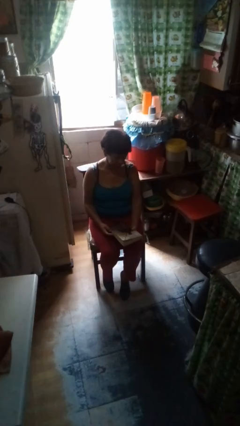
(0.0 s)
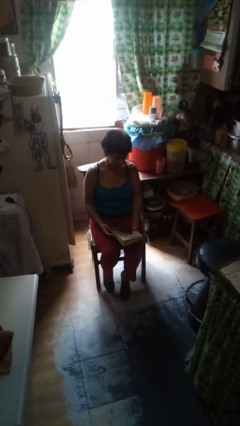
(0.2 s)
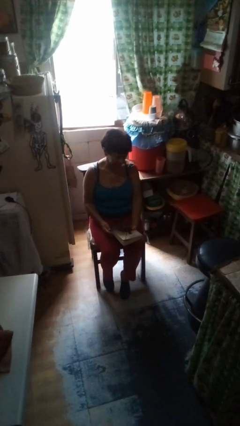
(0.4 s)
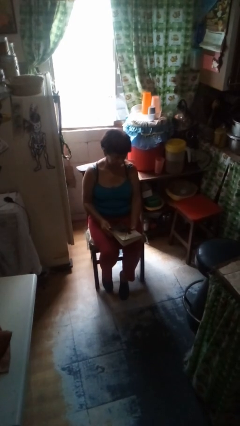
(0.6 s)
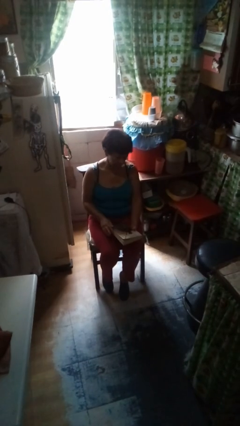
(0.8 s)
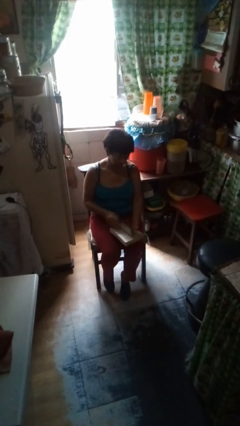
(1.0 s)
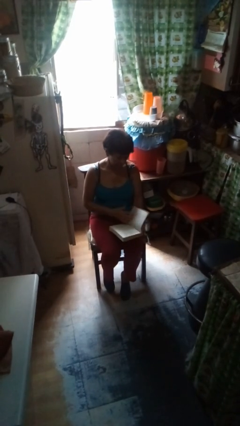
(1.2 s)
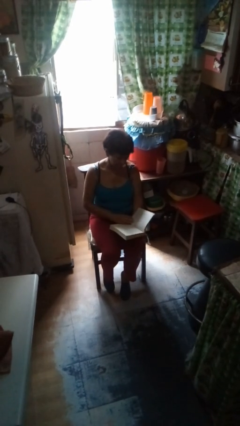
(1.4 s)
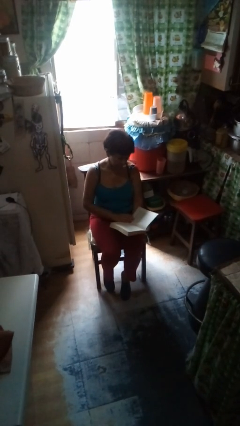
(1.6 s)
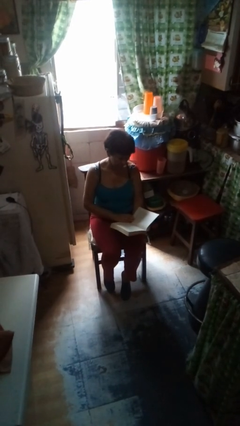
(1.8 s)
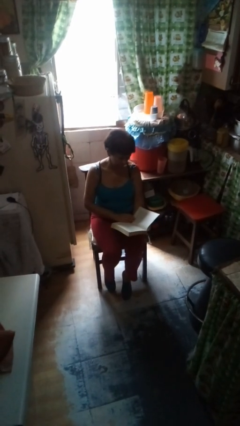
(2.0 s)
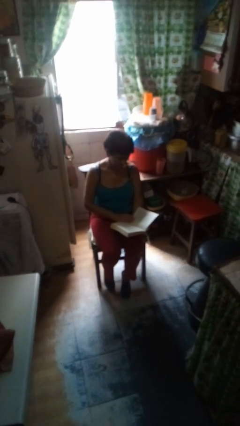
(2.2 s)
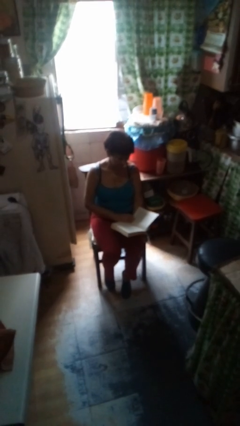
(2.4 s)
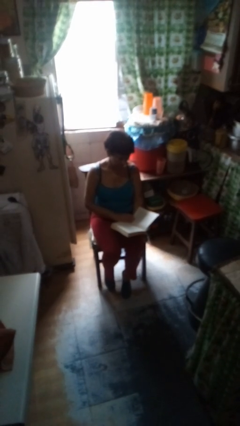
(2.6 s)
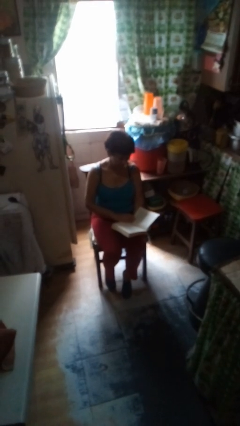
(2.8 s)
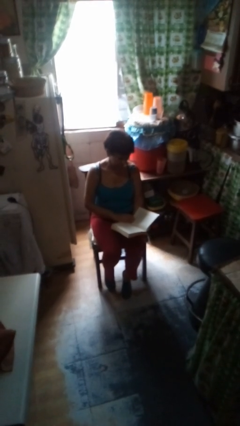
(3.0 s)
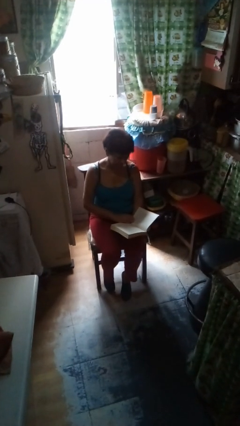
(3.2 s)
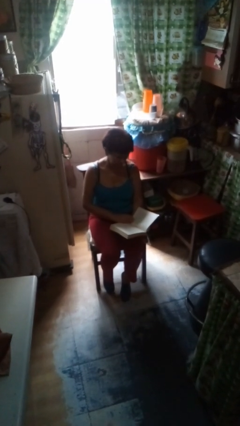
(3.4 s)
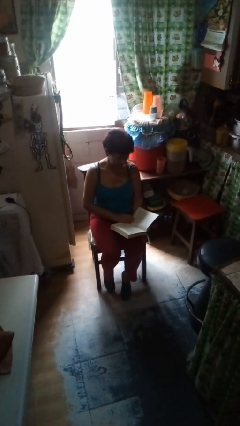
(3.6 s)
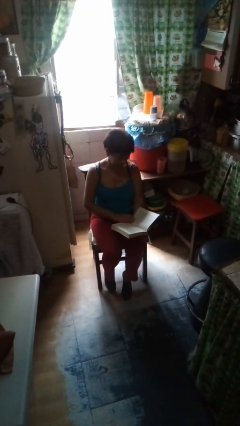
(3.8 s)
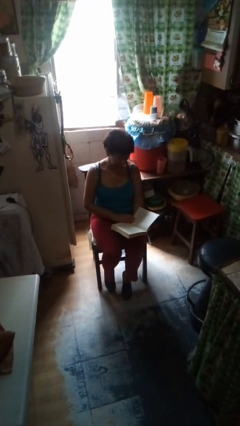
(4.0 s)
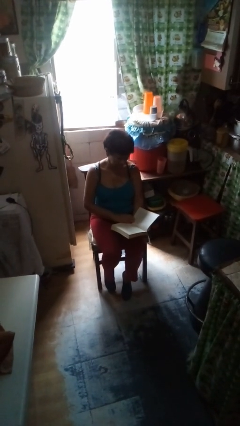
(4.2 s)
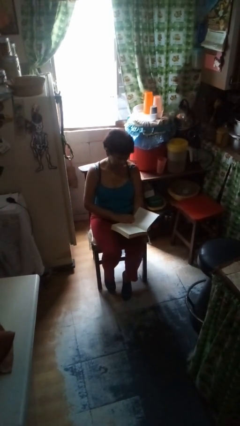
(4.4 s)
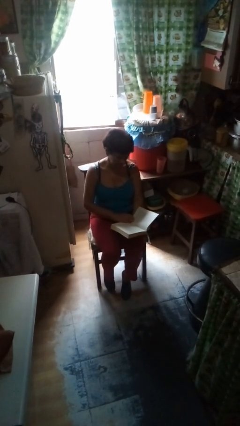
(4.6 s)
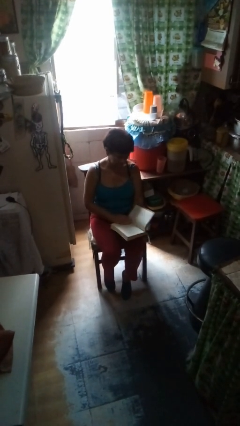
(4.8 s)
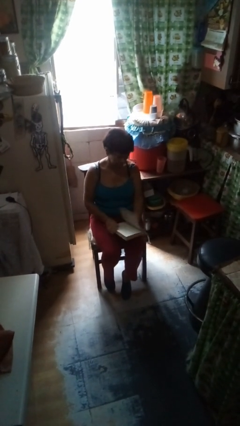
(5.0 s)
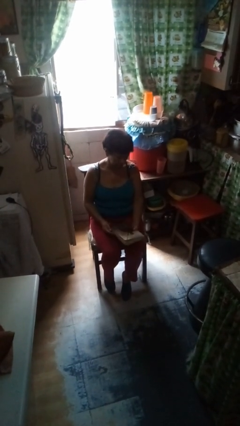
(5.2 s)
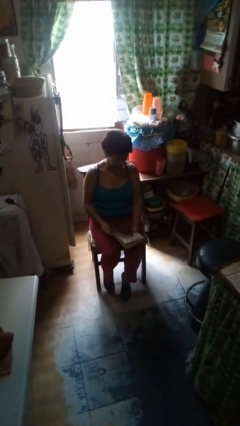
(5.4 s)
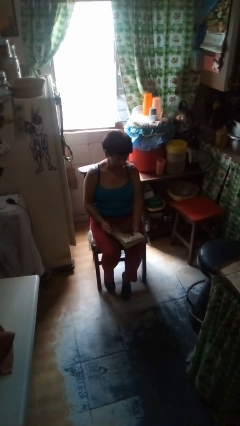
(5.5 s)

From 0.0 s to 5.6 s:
person reads book

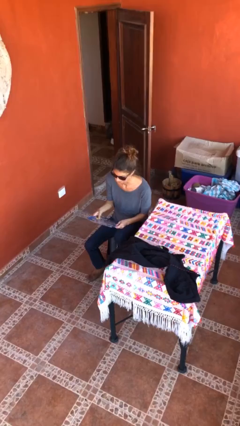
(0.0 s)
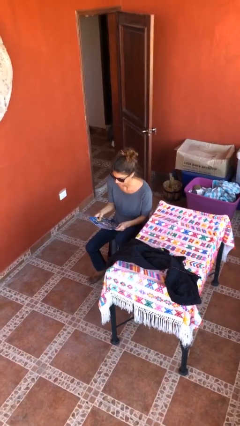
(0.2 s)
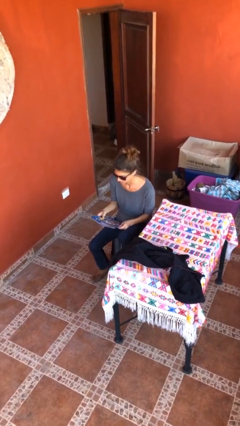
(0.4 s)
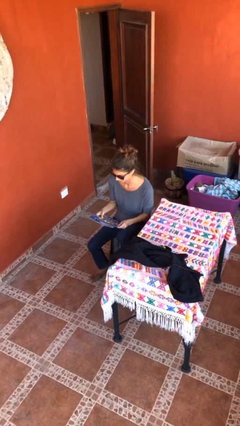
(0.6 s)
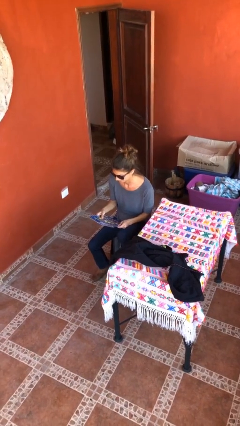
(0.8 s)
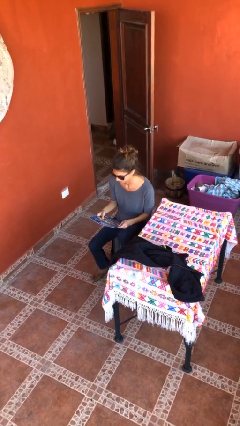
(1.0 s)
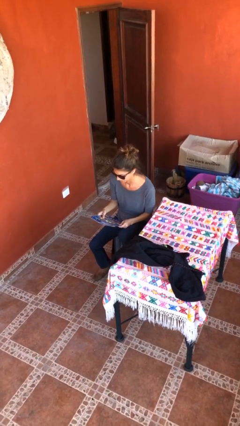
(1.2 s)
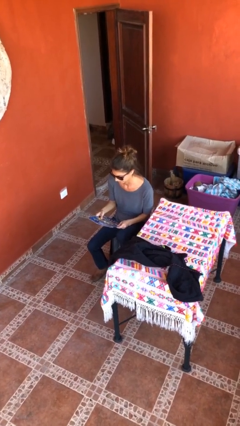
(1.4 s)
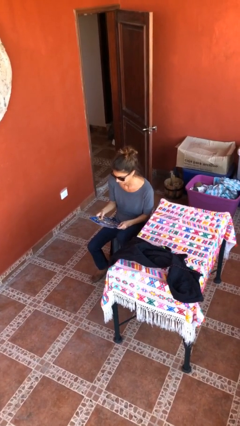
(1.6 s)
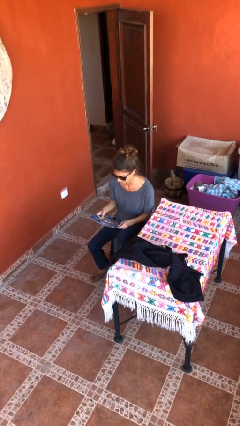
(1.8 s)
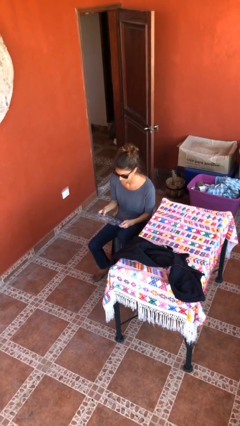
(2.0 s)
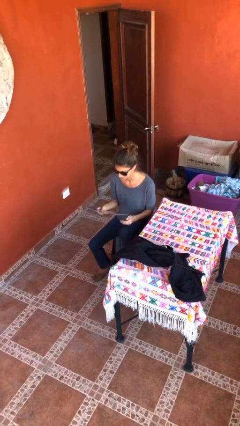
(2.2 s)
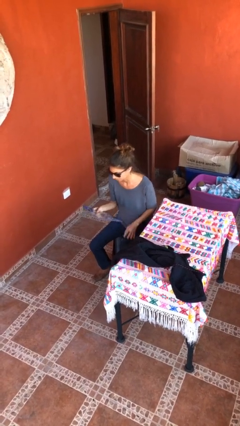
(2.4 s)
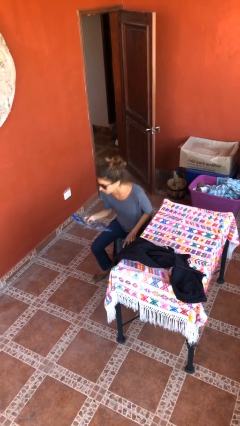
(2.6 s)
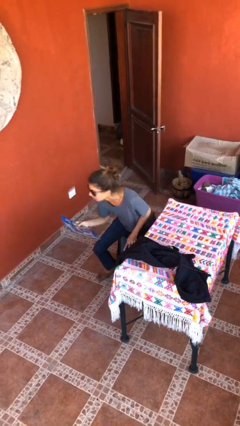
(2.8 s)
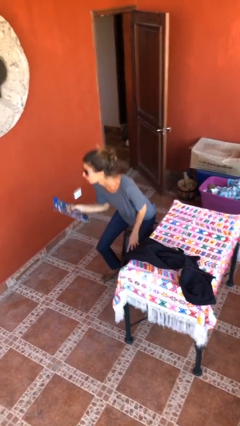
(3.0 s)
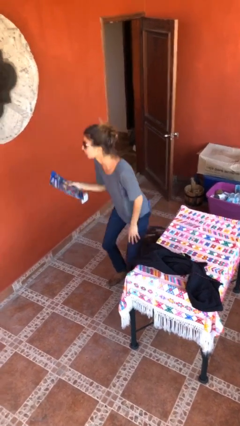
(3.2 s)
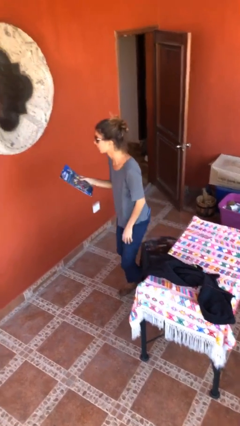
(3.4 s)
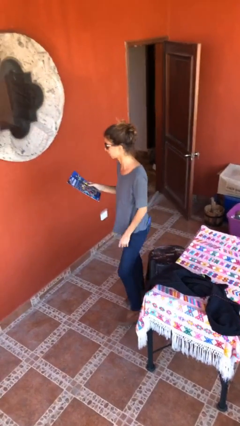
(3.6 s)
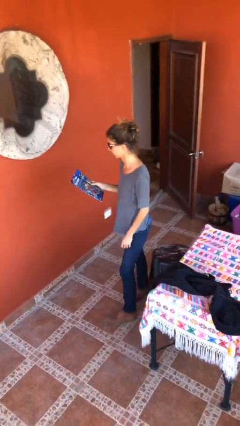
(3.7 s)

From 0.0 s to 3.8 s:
person stands up

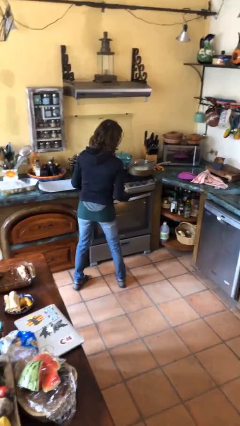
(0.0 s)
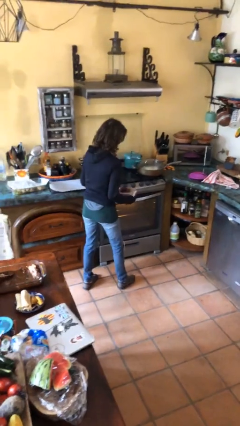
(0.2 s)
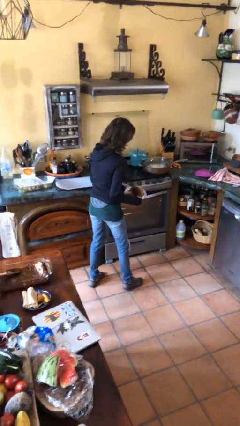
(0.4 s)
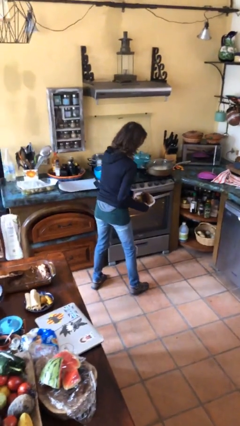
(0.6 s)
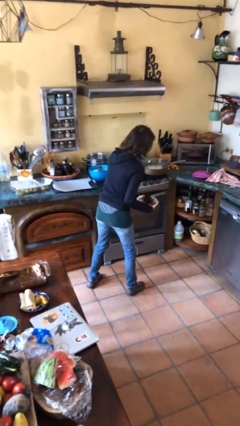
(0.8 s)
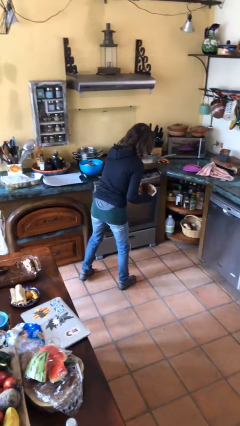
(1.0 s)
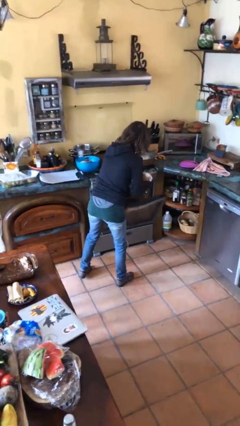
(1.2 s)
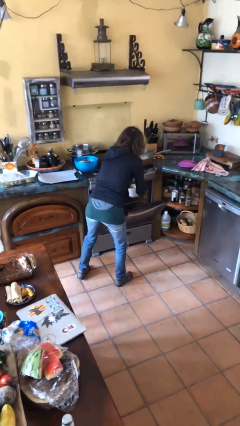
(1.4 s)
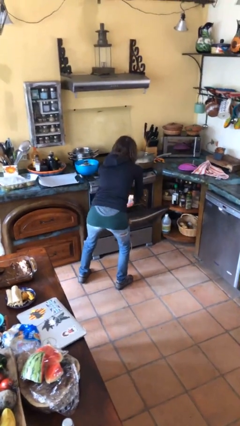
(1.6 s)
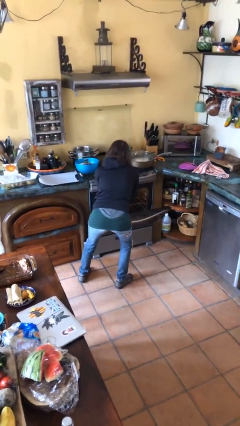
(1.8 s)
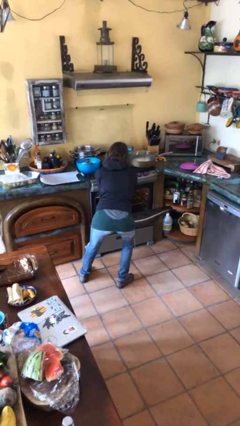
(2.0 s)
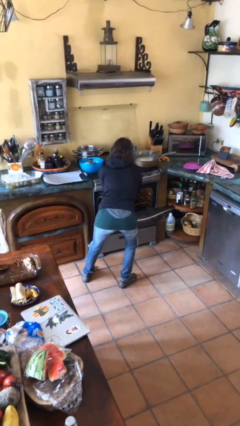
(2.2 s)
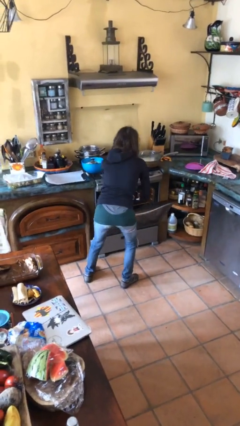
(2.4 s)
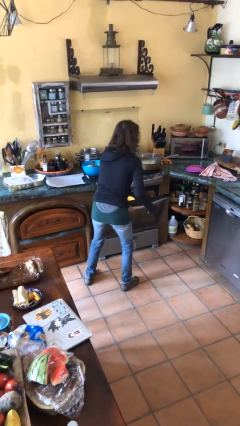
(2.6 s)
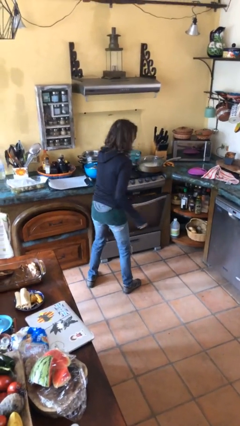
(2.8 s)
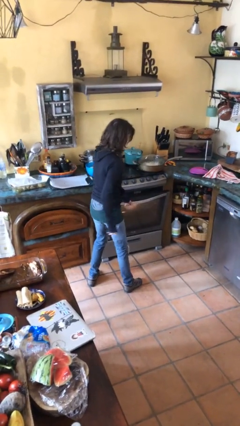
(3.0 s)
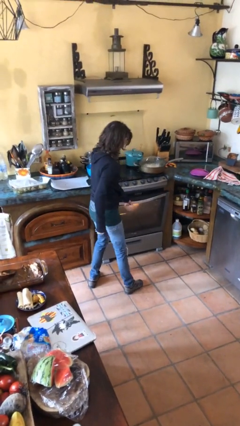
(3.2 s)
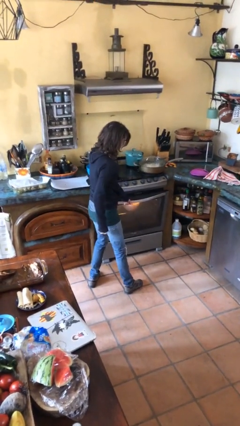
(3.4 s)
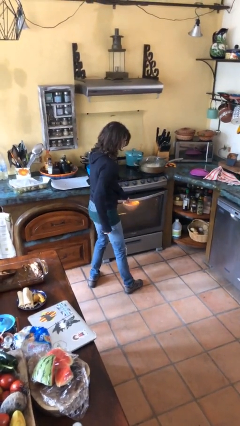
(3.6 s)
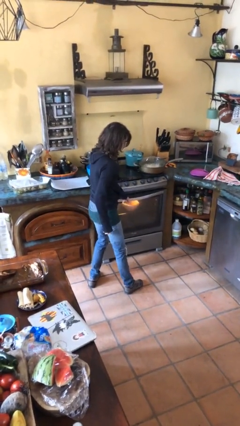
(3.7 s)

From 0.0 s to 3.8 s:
person puts object into oven

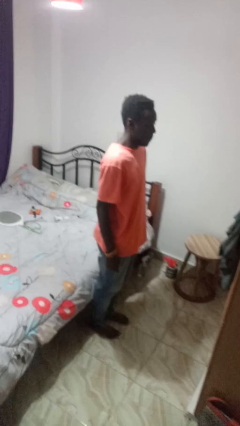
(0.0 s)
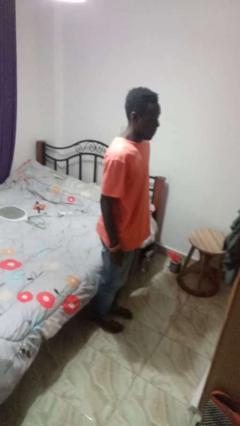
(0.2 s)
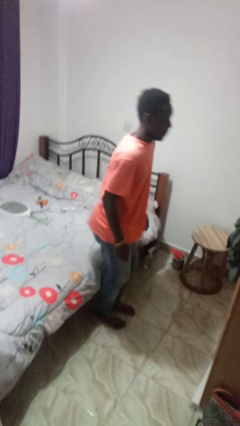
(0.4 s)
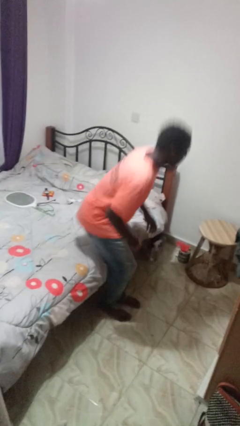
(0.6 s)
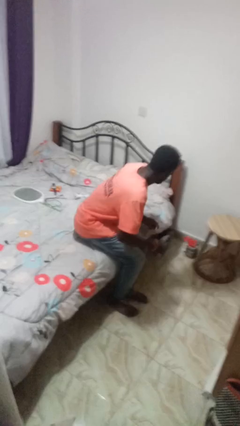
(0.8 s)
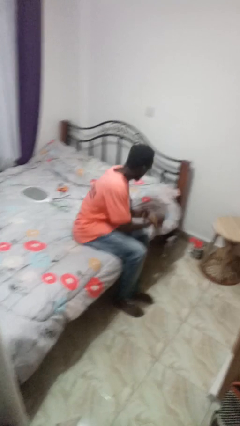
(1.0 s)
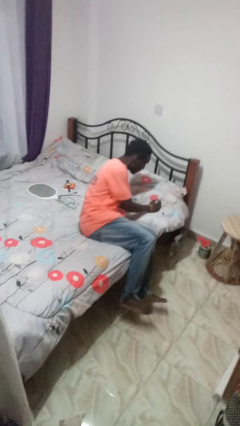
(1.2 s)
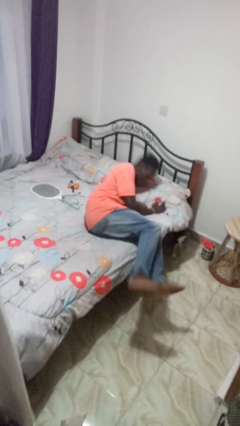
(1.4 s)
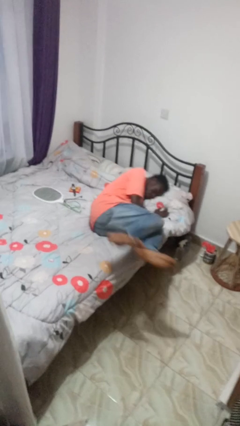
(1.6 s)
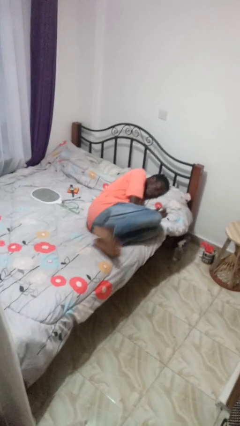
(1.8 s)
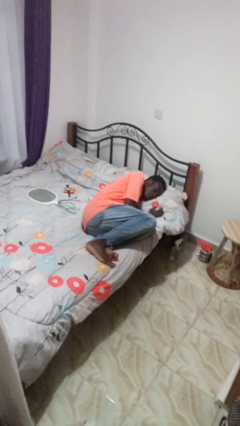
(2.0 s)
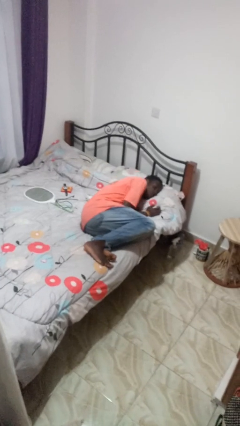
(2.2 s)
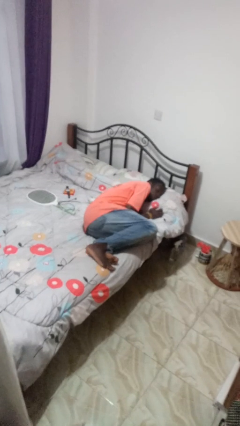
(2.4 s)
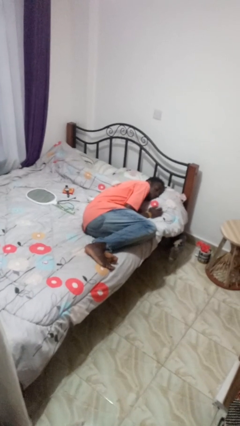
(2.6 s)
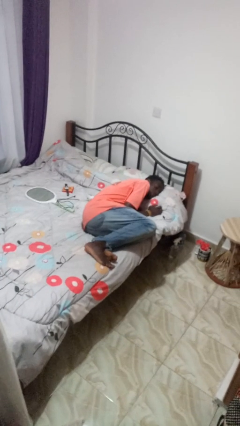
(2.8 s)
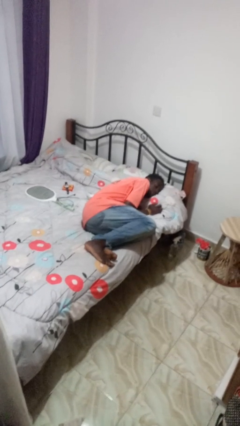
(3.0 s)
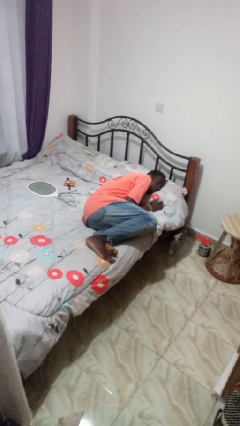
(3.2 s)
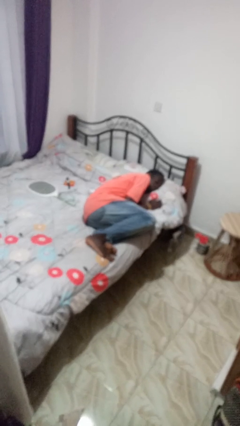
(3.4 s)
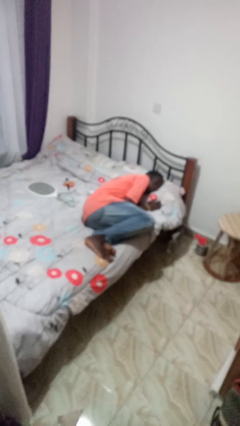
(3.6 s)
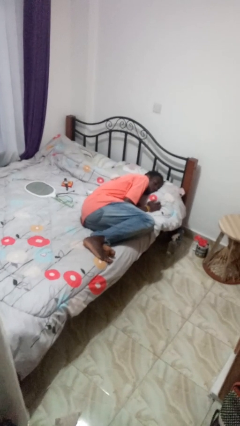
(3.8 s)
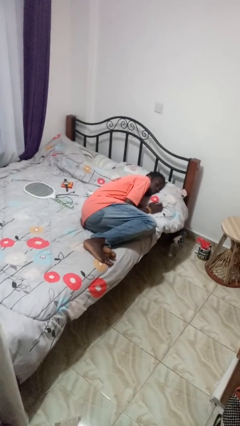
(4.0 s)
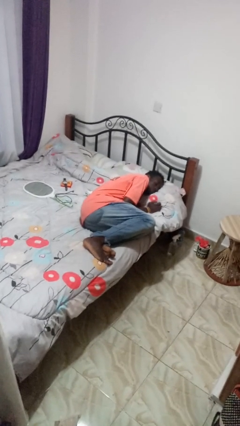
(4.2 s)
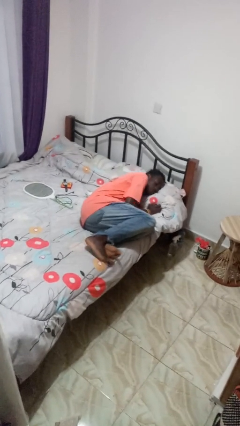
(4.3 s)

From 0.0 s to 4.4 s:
person lies down on bed

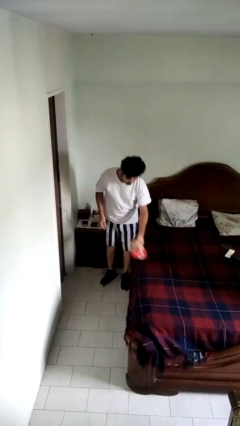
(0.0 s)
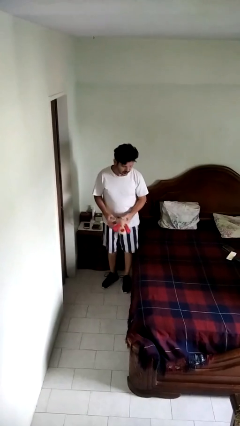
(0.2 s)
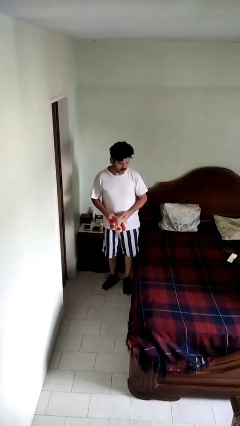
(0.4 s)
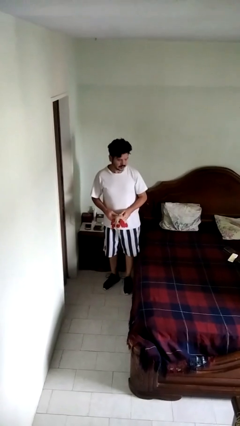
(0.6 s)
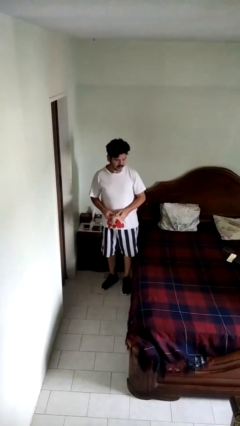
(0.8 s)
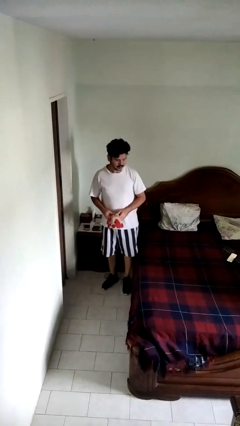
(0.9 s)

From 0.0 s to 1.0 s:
person picks up object from bed
